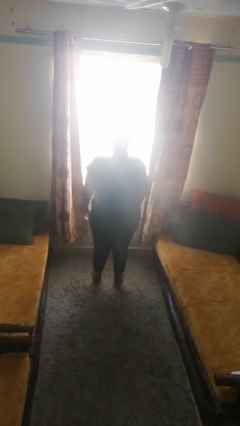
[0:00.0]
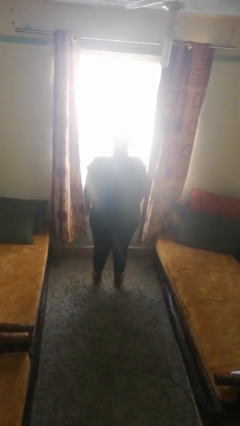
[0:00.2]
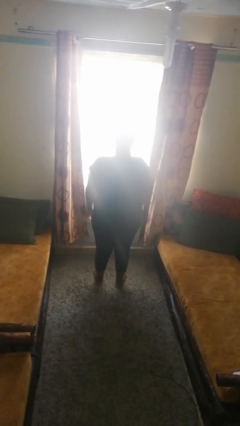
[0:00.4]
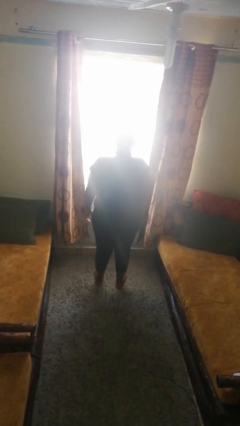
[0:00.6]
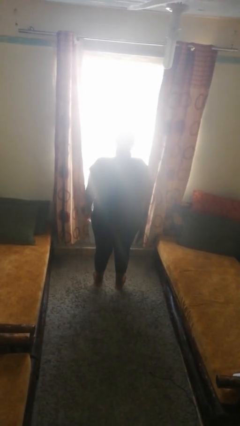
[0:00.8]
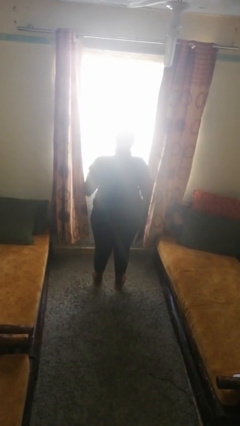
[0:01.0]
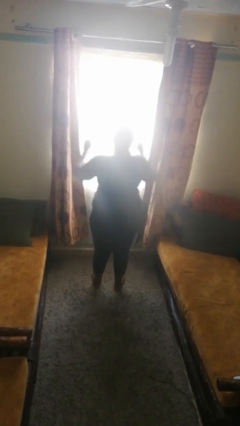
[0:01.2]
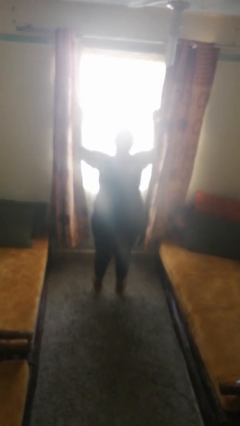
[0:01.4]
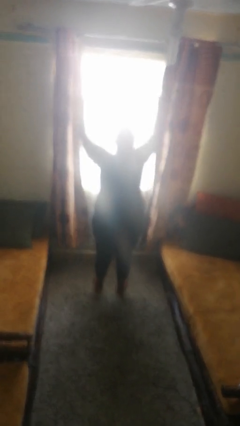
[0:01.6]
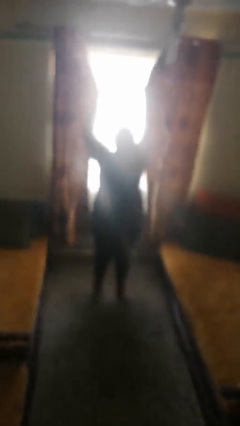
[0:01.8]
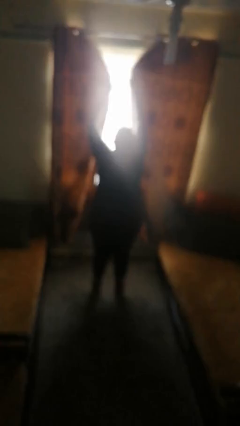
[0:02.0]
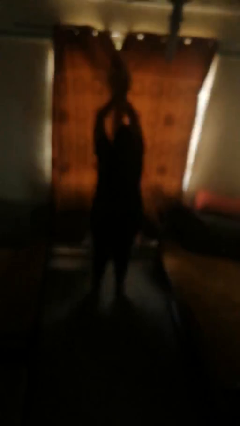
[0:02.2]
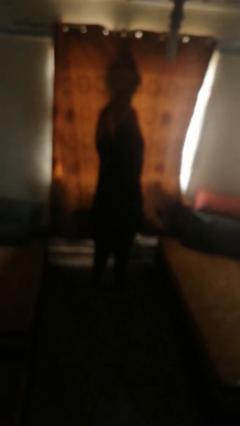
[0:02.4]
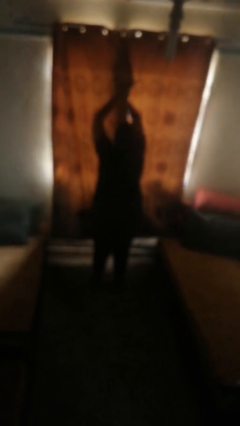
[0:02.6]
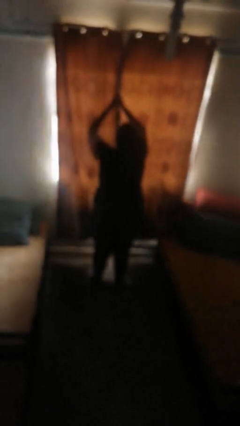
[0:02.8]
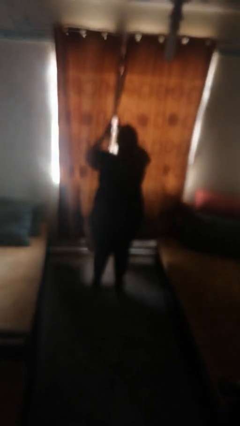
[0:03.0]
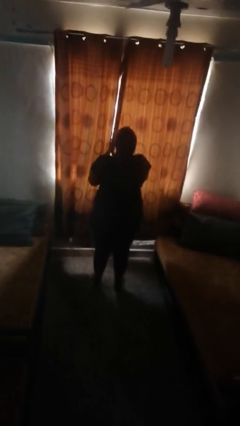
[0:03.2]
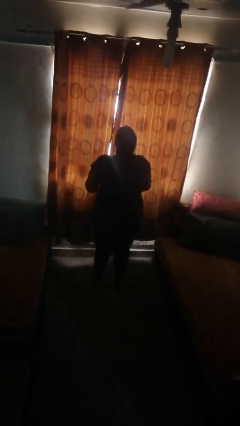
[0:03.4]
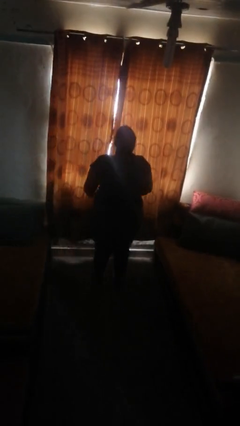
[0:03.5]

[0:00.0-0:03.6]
person closes curtains

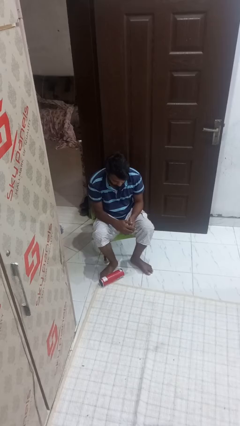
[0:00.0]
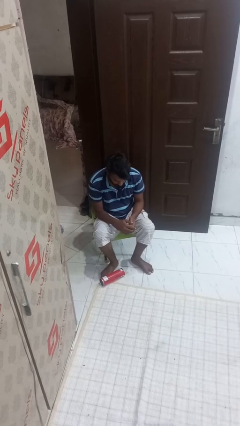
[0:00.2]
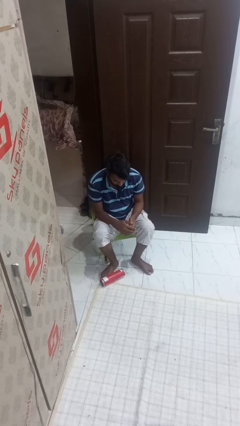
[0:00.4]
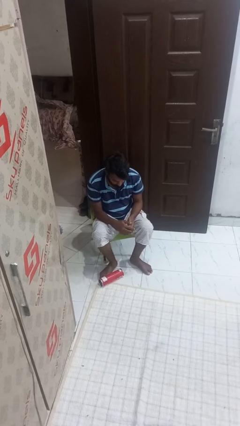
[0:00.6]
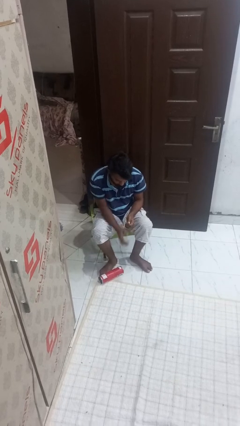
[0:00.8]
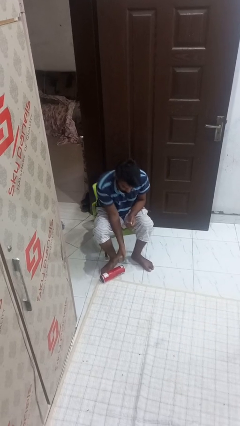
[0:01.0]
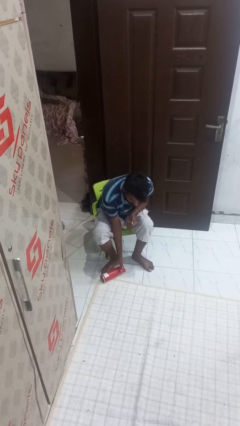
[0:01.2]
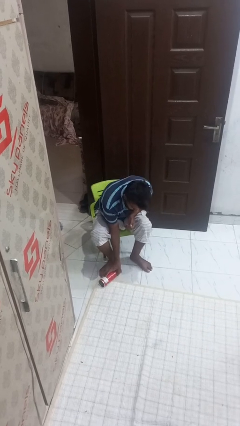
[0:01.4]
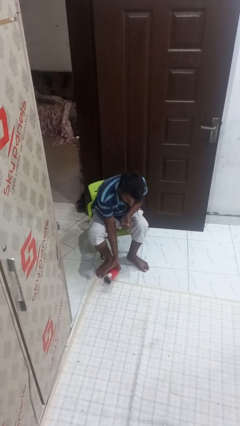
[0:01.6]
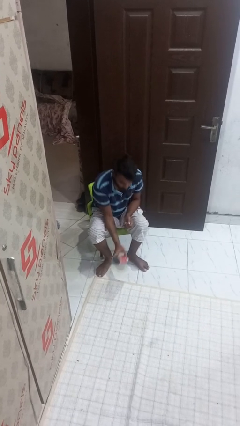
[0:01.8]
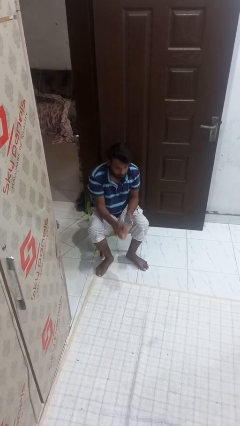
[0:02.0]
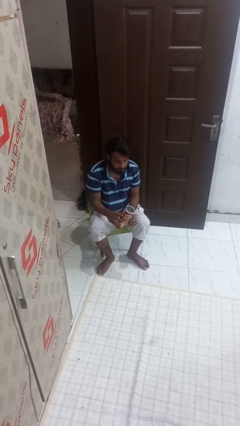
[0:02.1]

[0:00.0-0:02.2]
person picks up object from floor

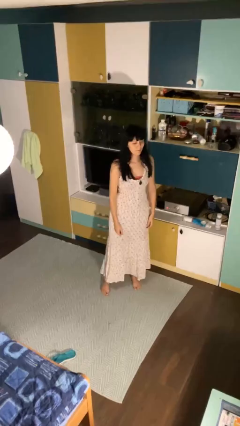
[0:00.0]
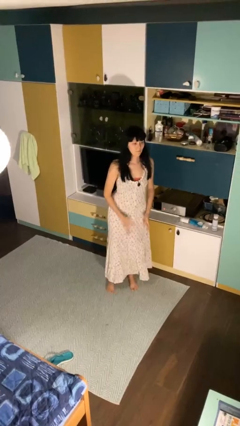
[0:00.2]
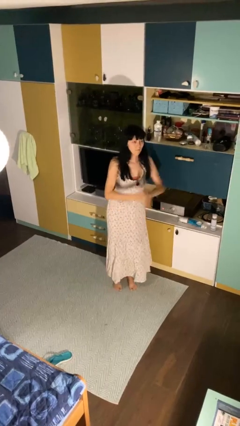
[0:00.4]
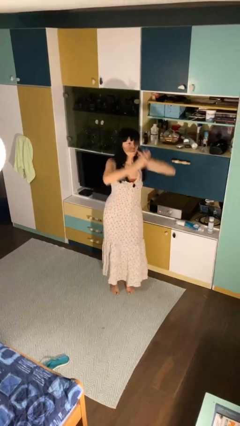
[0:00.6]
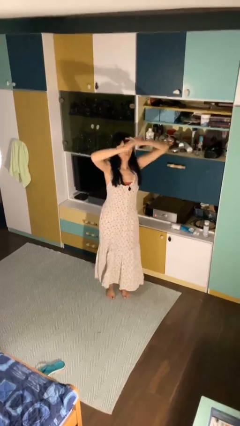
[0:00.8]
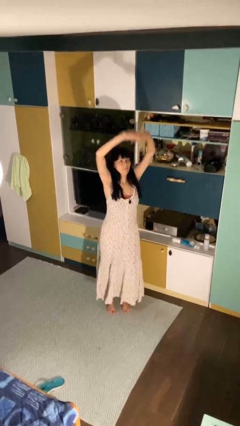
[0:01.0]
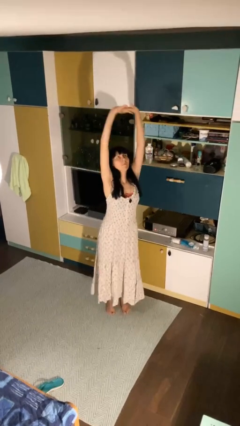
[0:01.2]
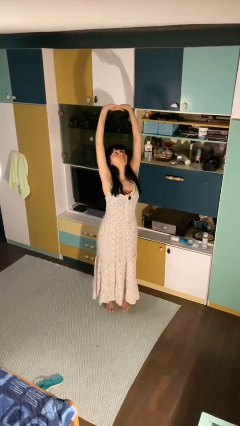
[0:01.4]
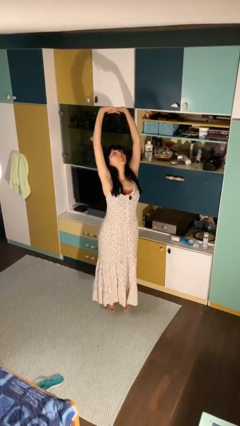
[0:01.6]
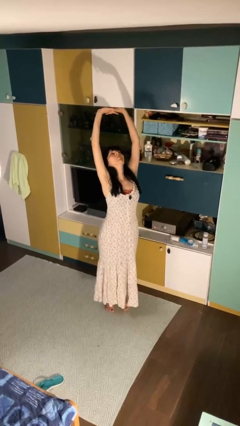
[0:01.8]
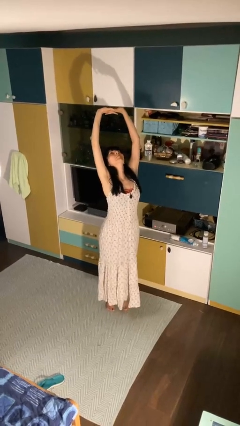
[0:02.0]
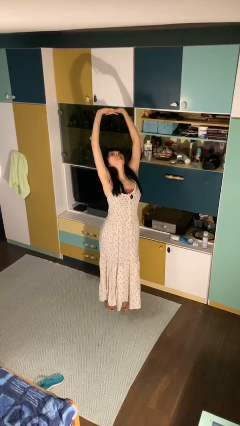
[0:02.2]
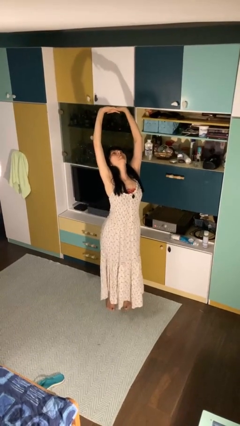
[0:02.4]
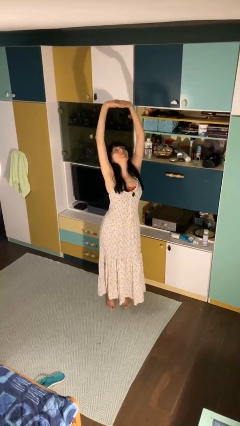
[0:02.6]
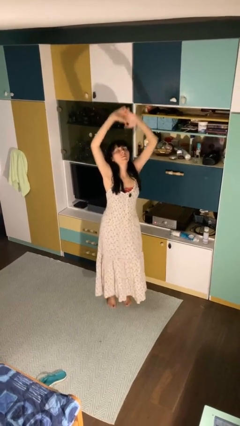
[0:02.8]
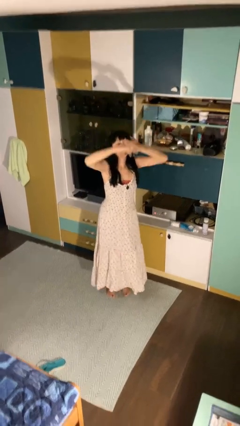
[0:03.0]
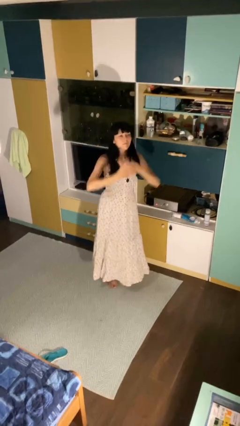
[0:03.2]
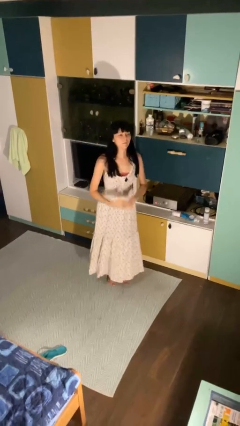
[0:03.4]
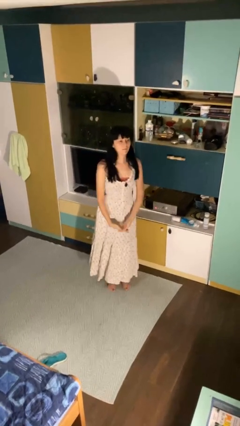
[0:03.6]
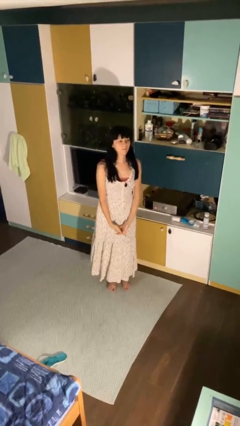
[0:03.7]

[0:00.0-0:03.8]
person stretches arms over head

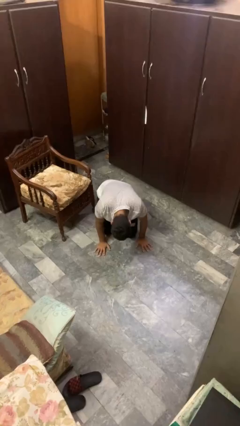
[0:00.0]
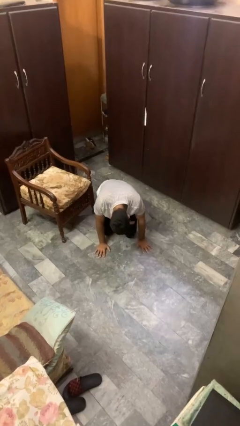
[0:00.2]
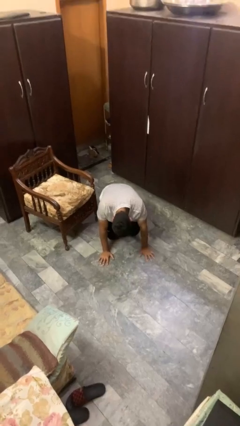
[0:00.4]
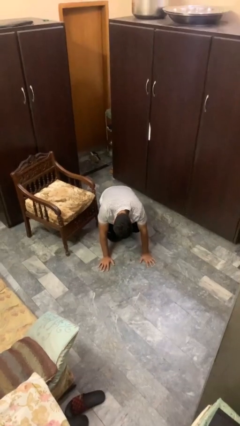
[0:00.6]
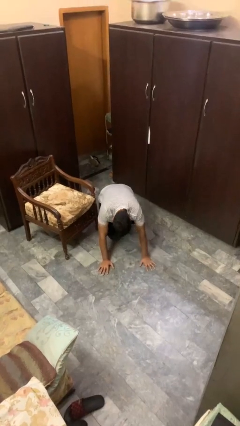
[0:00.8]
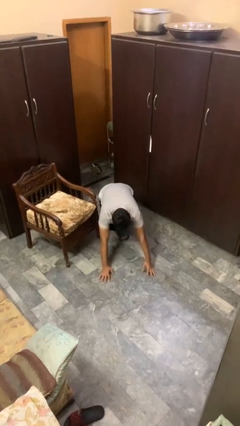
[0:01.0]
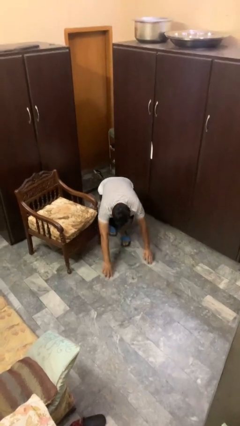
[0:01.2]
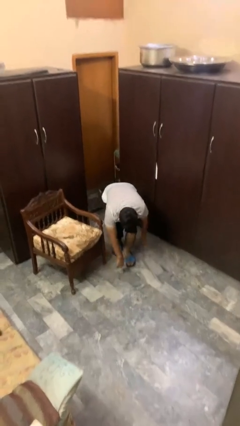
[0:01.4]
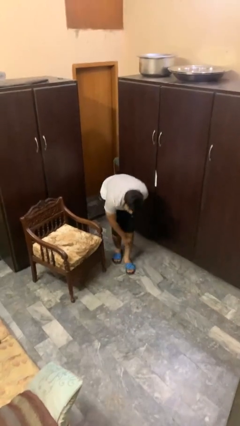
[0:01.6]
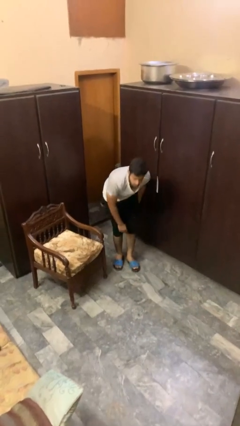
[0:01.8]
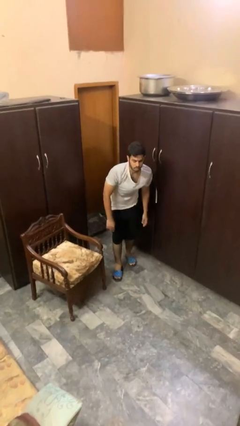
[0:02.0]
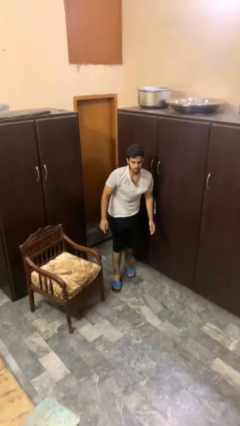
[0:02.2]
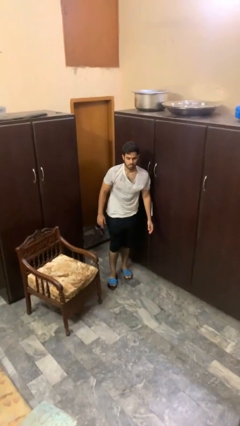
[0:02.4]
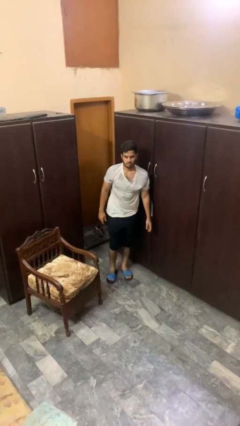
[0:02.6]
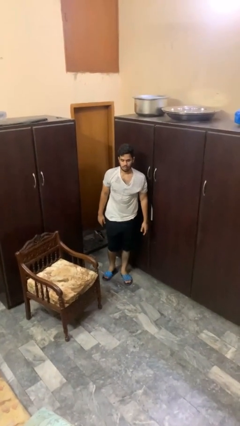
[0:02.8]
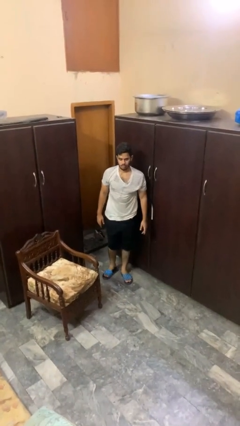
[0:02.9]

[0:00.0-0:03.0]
person stands up from floor

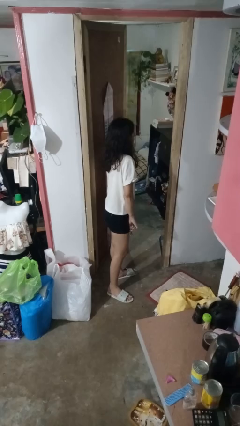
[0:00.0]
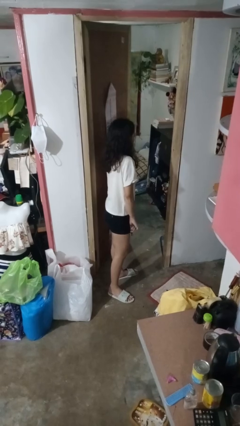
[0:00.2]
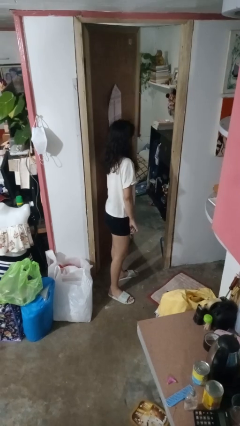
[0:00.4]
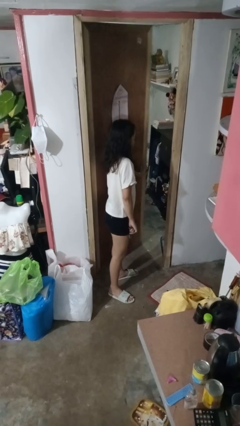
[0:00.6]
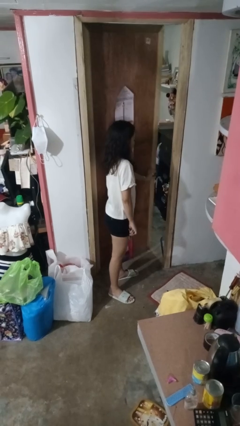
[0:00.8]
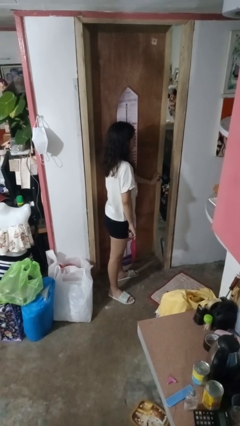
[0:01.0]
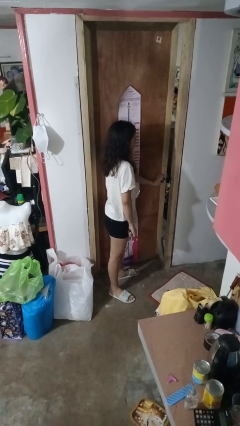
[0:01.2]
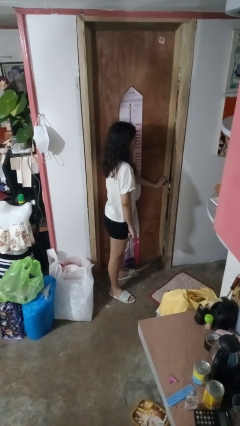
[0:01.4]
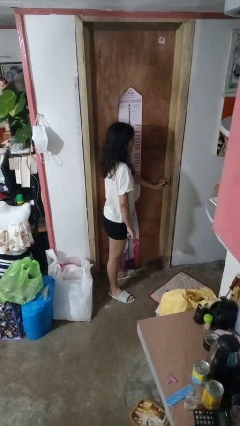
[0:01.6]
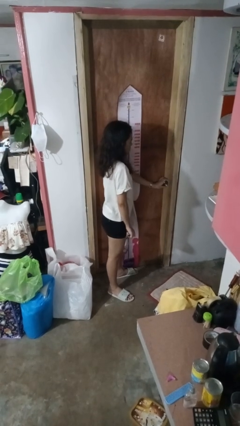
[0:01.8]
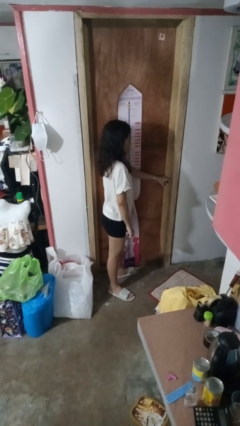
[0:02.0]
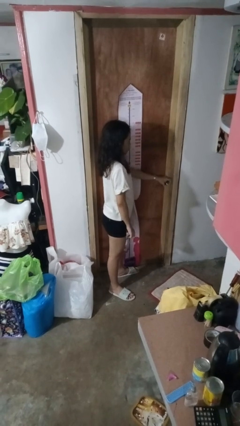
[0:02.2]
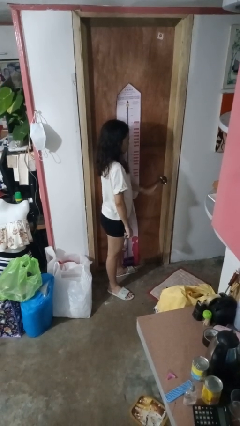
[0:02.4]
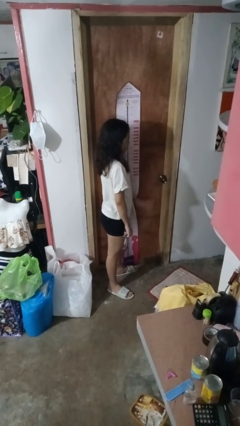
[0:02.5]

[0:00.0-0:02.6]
person closes facility door

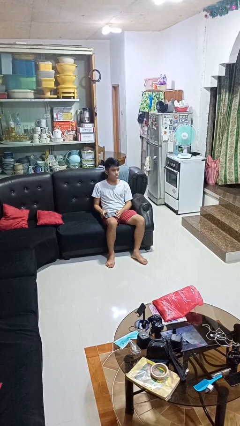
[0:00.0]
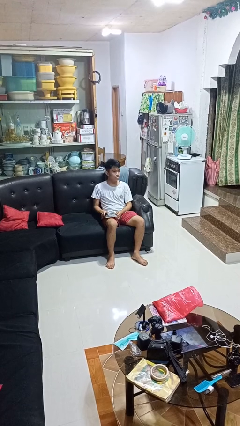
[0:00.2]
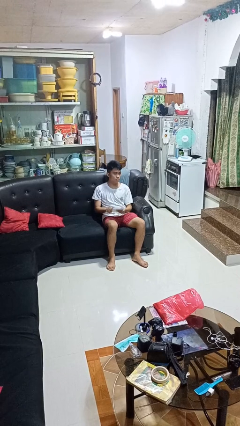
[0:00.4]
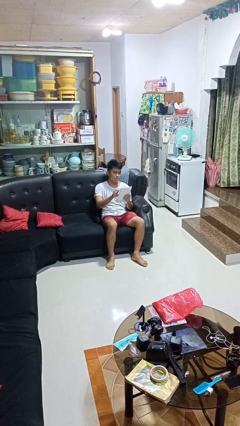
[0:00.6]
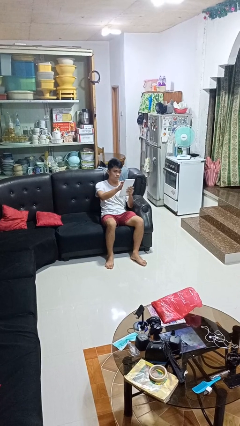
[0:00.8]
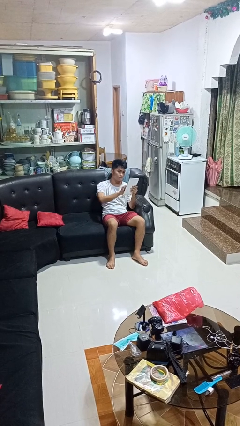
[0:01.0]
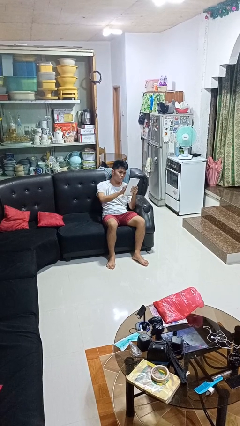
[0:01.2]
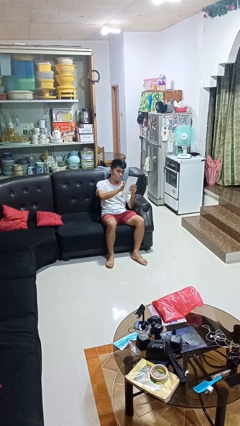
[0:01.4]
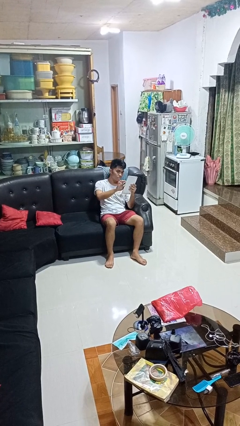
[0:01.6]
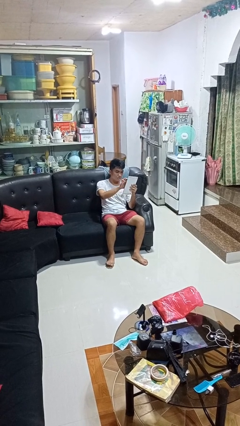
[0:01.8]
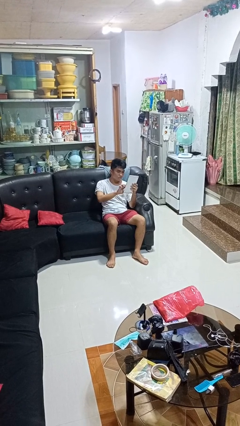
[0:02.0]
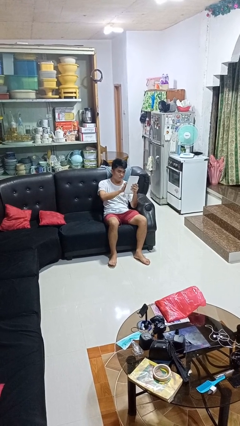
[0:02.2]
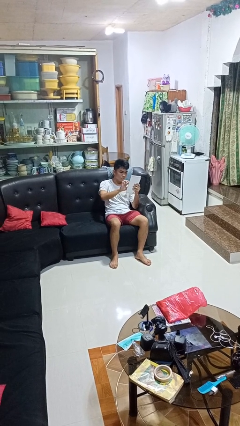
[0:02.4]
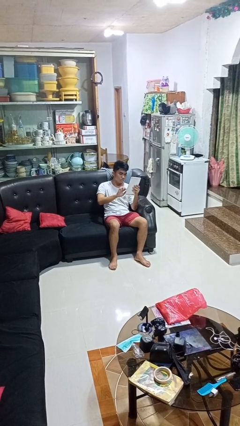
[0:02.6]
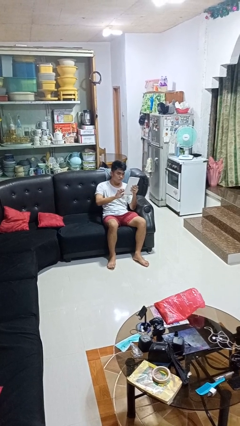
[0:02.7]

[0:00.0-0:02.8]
person interacts with tablet
